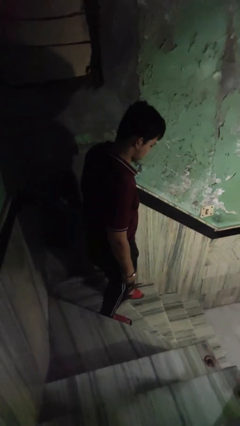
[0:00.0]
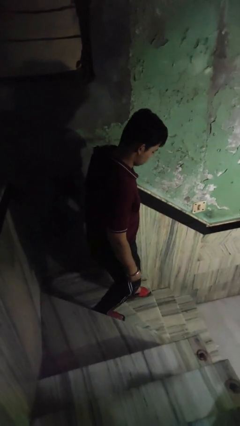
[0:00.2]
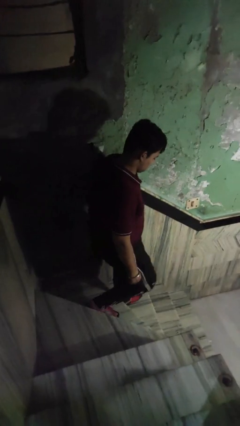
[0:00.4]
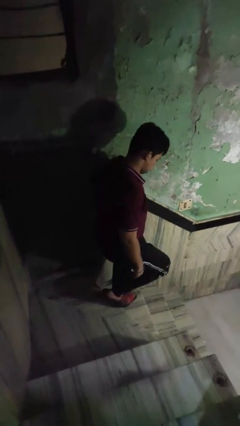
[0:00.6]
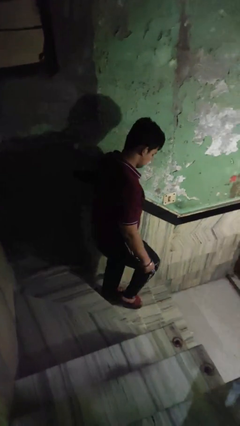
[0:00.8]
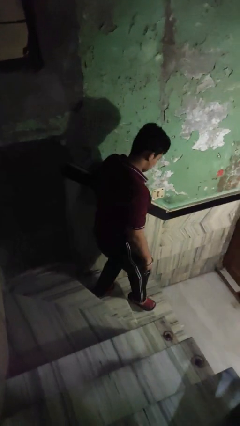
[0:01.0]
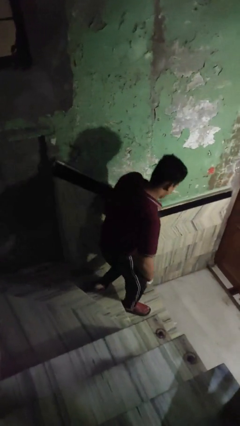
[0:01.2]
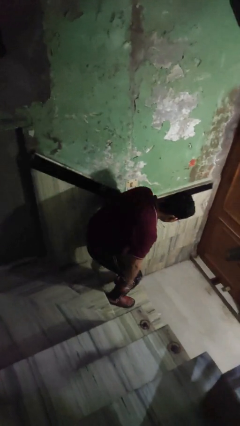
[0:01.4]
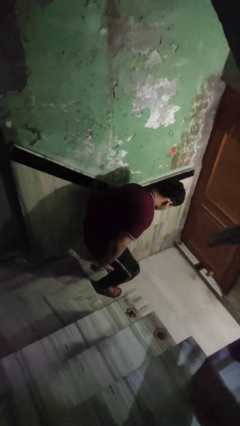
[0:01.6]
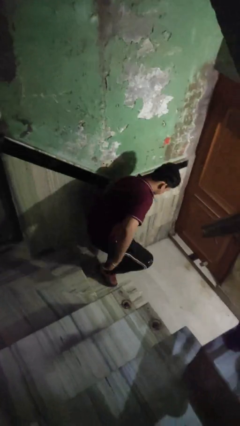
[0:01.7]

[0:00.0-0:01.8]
person climbs down stairs

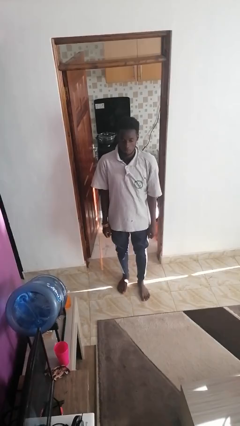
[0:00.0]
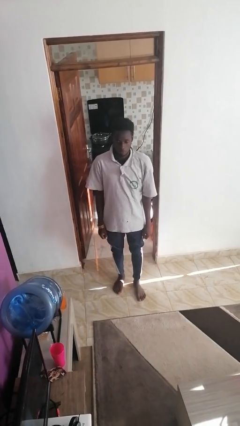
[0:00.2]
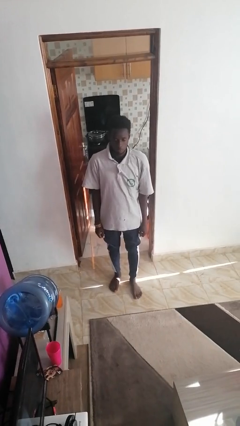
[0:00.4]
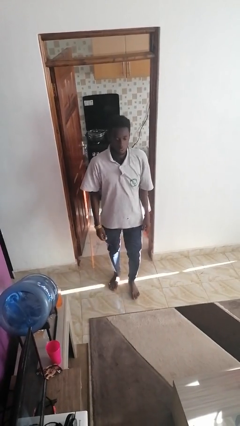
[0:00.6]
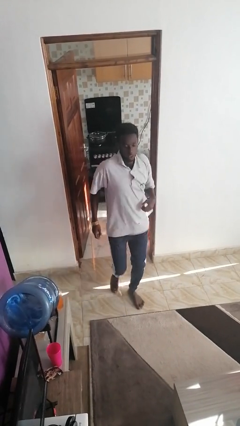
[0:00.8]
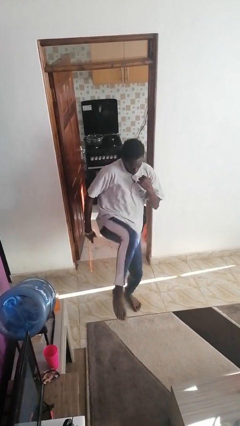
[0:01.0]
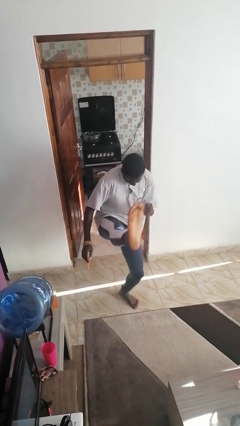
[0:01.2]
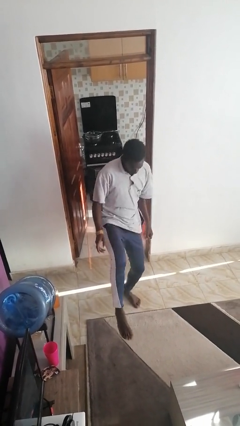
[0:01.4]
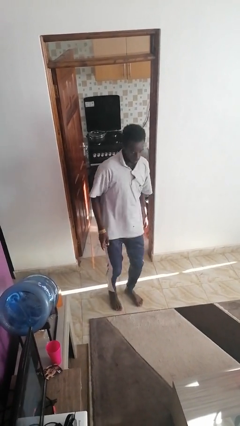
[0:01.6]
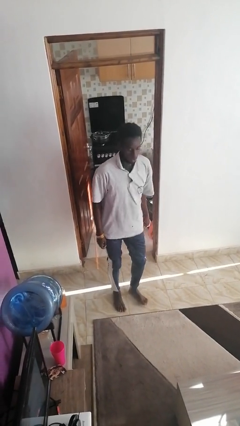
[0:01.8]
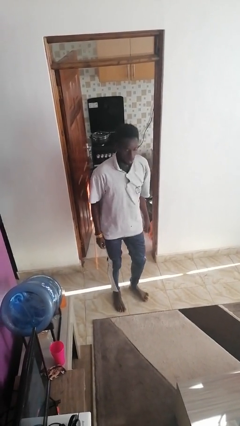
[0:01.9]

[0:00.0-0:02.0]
person karate kicks

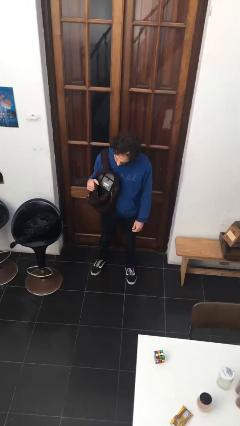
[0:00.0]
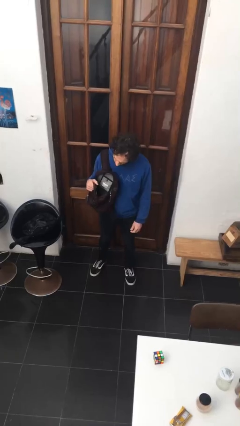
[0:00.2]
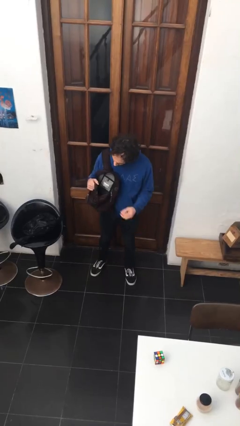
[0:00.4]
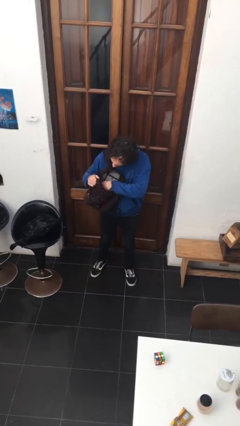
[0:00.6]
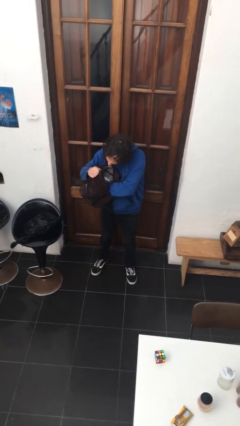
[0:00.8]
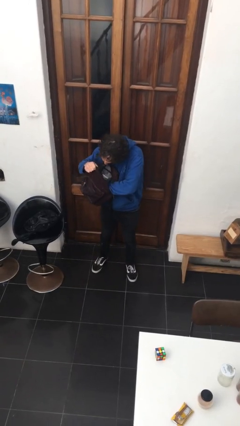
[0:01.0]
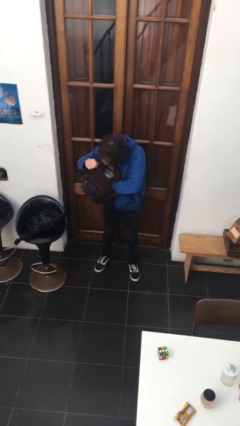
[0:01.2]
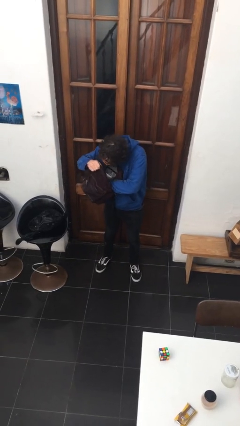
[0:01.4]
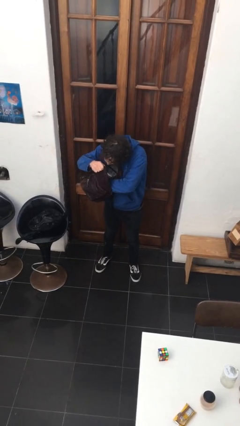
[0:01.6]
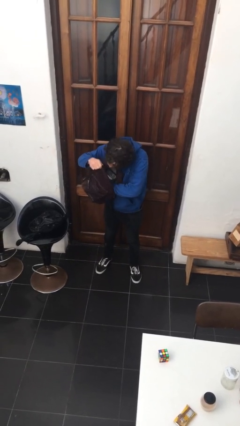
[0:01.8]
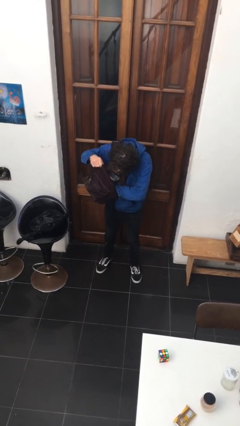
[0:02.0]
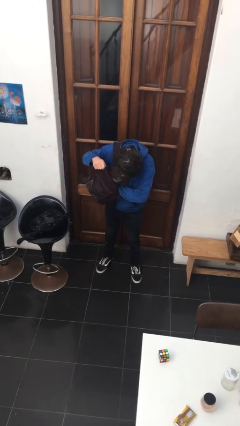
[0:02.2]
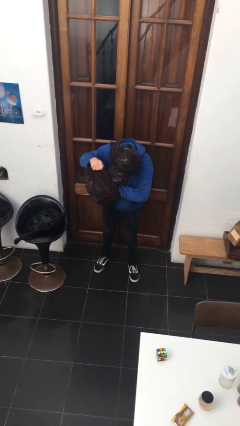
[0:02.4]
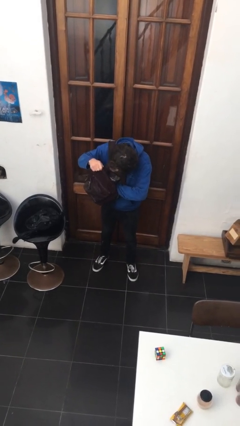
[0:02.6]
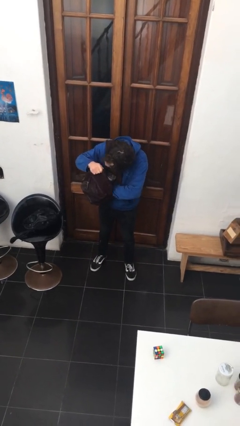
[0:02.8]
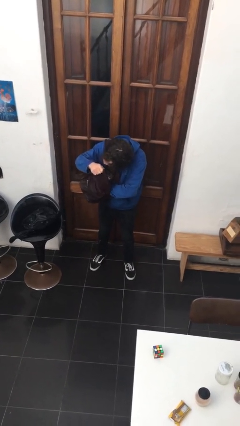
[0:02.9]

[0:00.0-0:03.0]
person searches in backpack

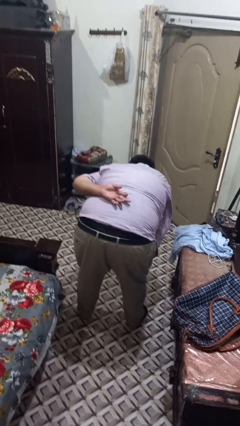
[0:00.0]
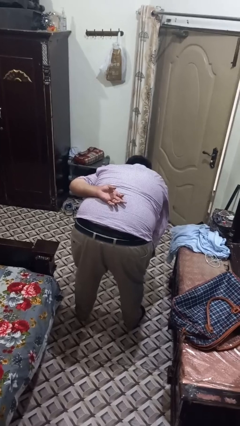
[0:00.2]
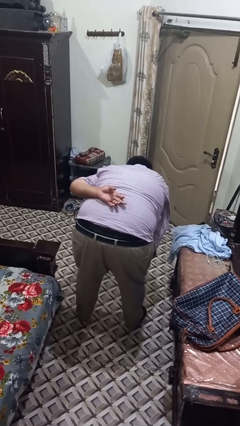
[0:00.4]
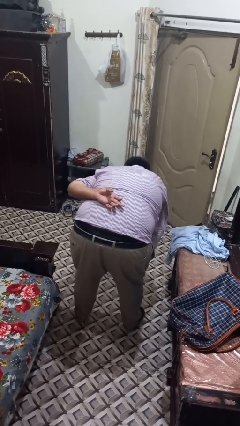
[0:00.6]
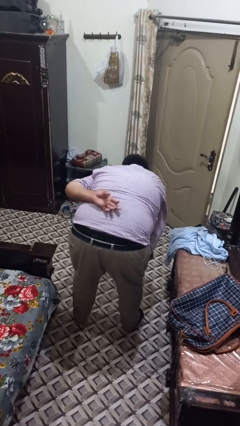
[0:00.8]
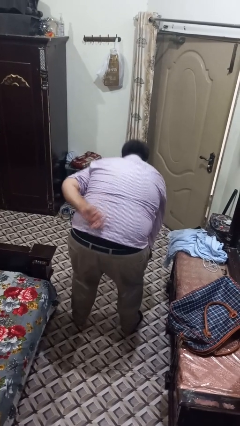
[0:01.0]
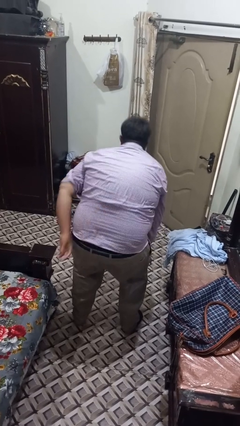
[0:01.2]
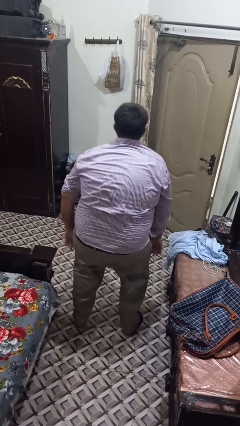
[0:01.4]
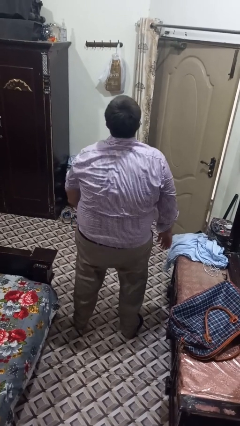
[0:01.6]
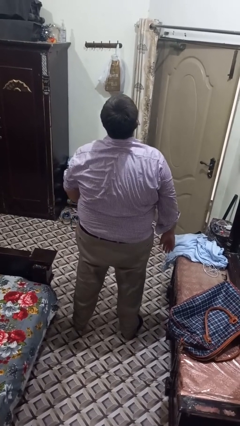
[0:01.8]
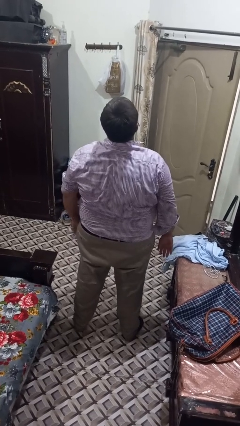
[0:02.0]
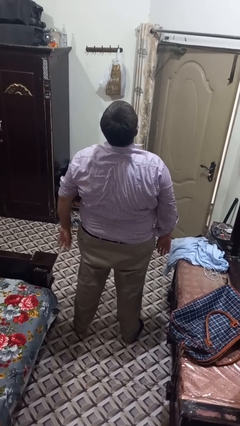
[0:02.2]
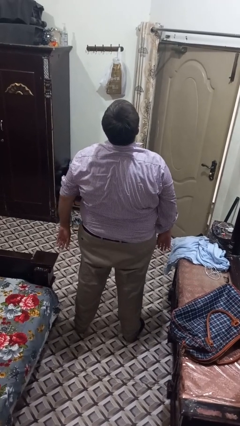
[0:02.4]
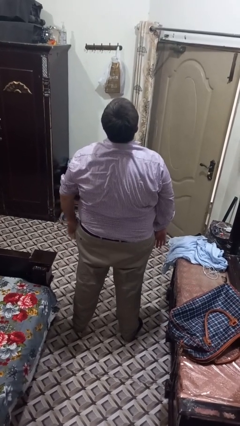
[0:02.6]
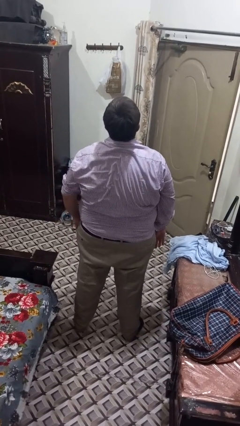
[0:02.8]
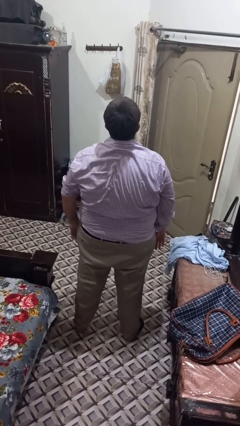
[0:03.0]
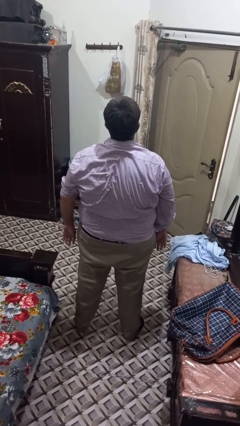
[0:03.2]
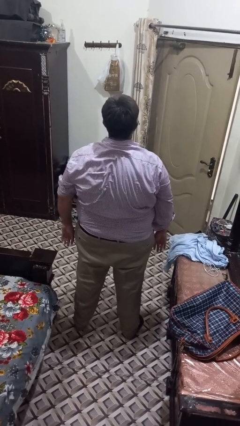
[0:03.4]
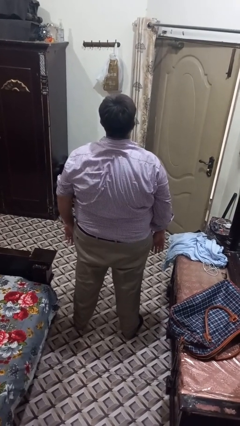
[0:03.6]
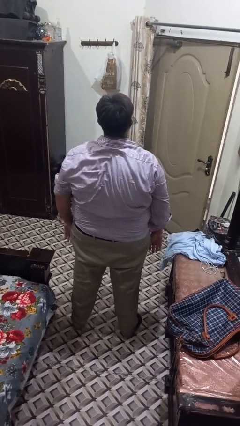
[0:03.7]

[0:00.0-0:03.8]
person stands up from floor

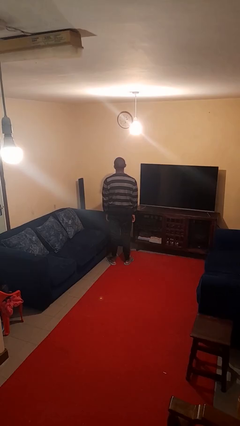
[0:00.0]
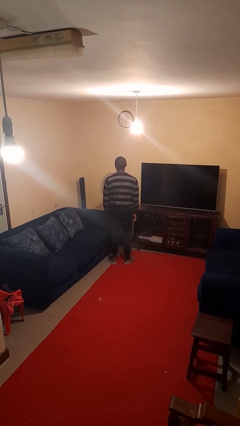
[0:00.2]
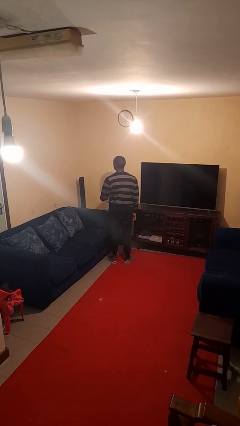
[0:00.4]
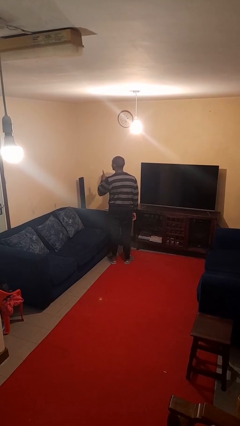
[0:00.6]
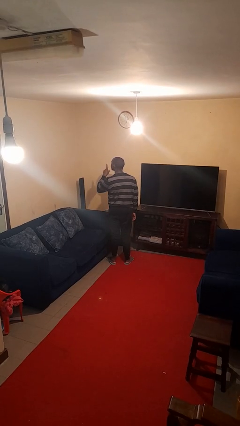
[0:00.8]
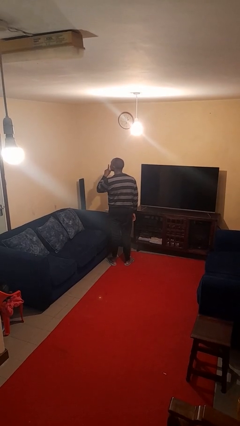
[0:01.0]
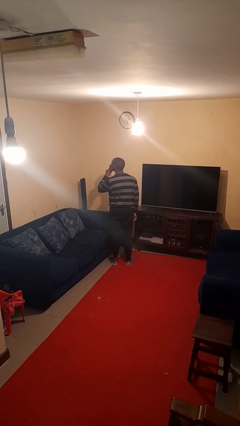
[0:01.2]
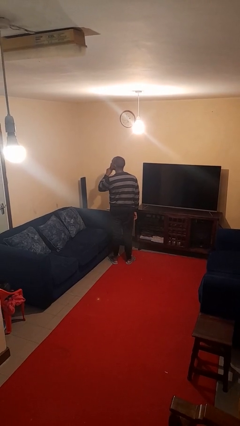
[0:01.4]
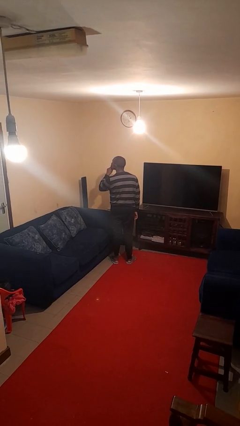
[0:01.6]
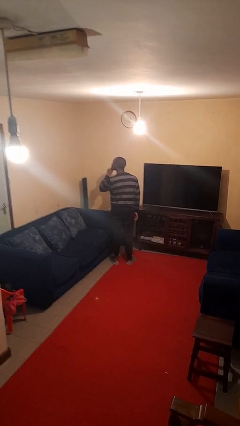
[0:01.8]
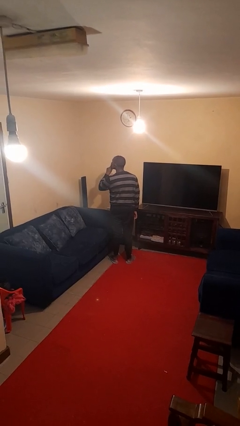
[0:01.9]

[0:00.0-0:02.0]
person gestures be quiet

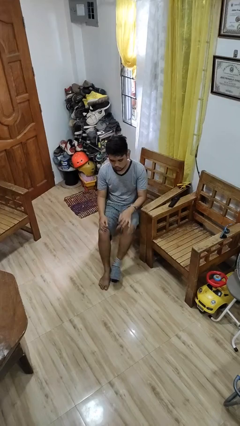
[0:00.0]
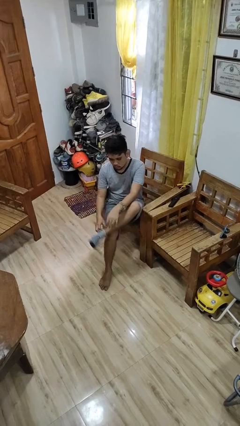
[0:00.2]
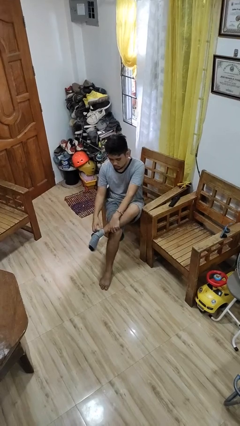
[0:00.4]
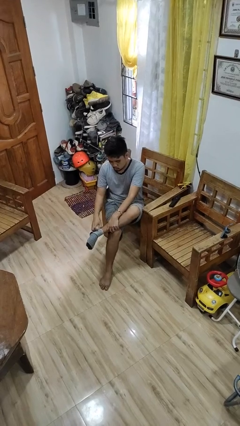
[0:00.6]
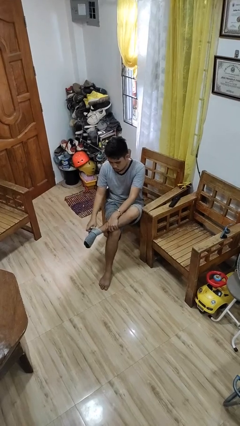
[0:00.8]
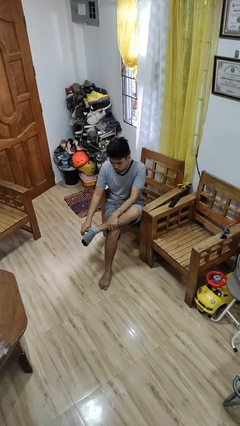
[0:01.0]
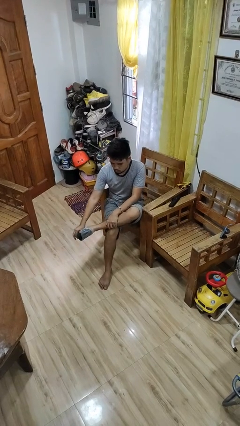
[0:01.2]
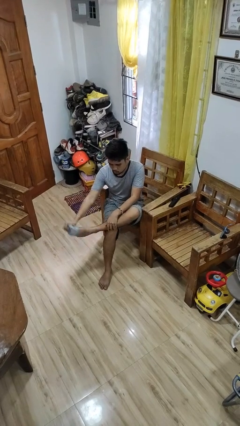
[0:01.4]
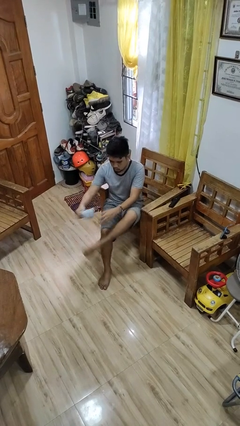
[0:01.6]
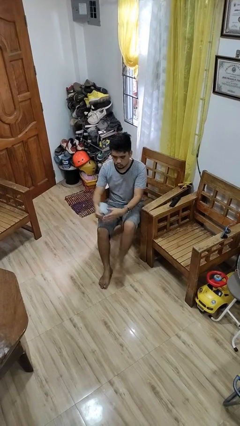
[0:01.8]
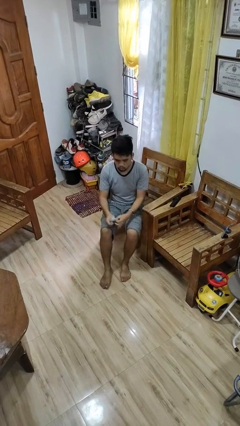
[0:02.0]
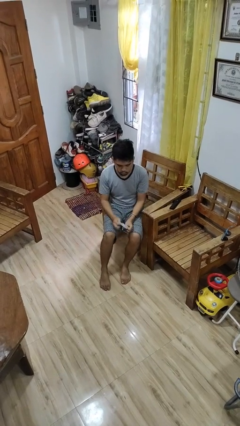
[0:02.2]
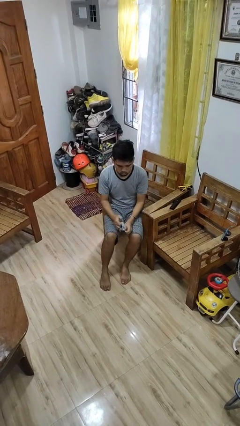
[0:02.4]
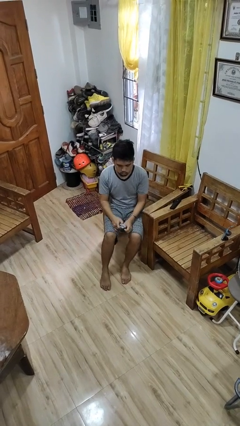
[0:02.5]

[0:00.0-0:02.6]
person takes off socks

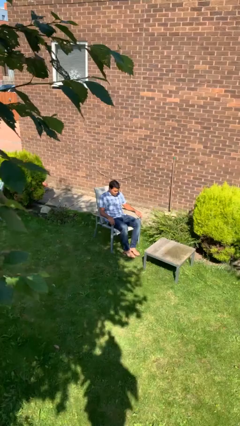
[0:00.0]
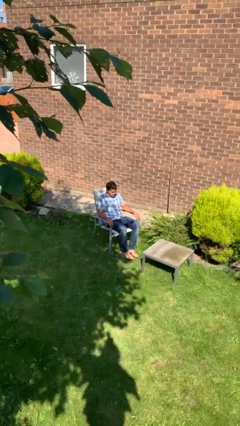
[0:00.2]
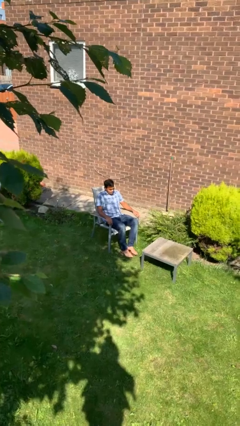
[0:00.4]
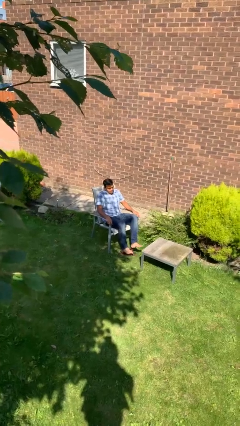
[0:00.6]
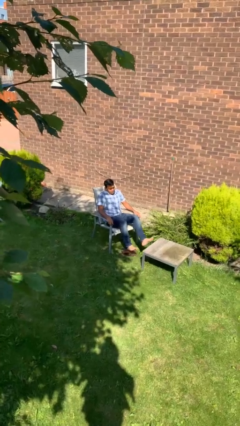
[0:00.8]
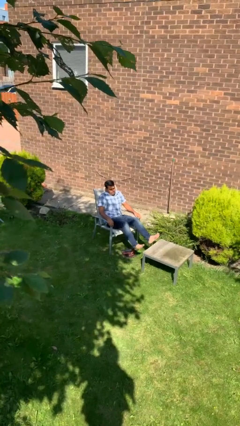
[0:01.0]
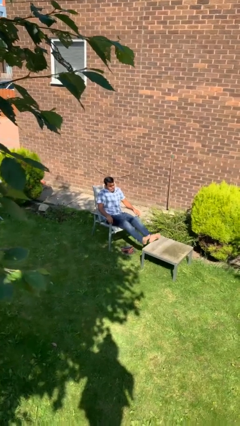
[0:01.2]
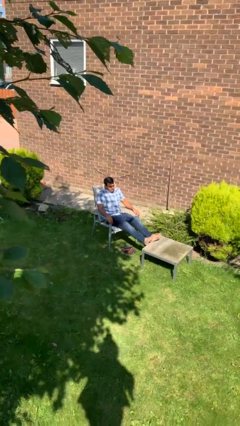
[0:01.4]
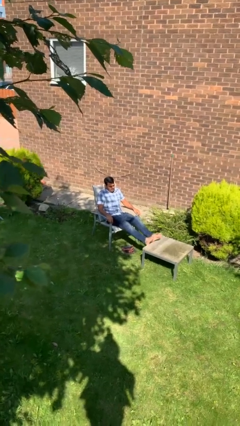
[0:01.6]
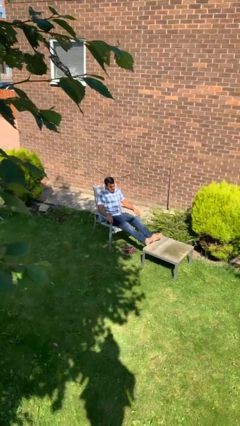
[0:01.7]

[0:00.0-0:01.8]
person puts feet up
